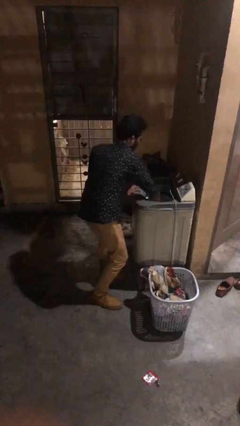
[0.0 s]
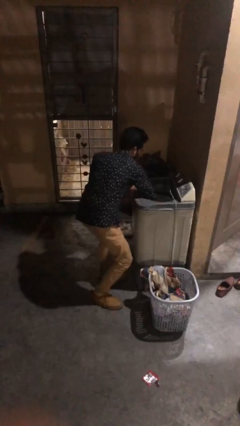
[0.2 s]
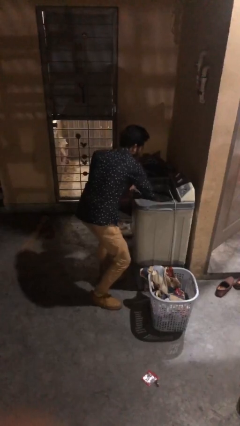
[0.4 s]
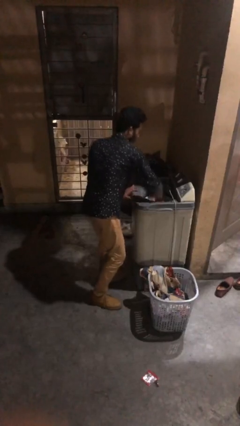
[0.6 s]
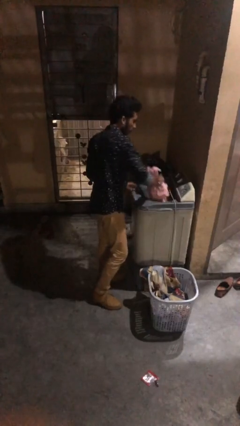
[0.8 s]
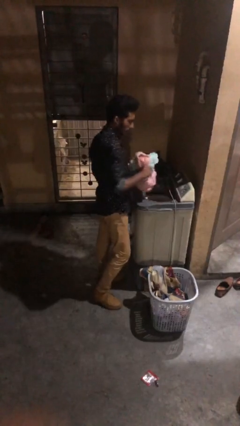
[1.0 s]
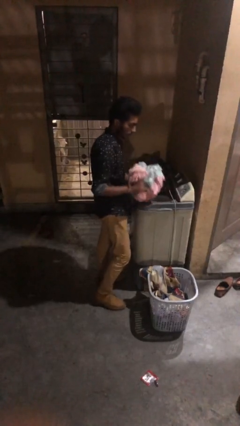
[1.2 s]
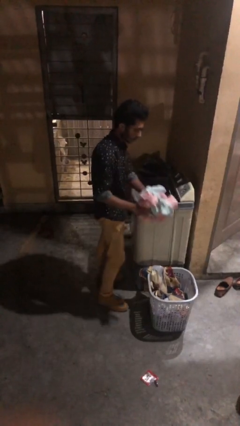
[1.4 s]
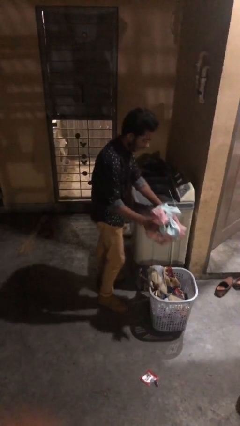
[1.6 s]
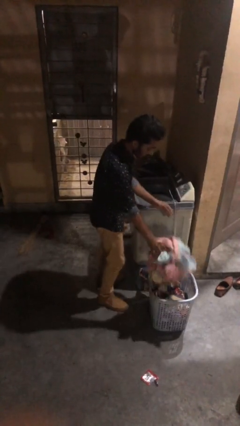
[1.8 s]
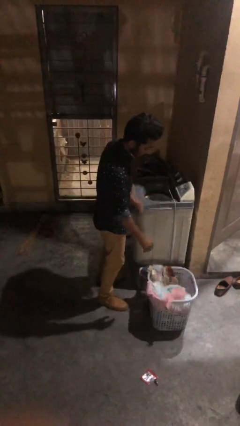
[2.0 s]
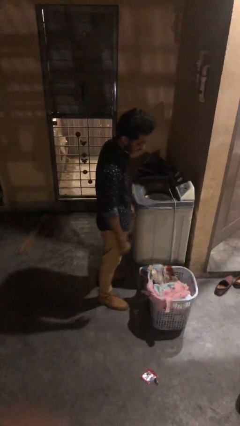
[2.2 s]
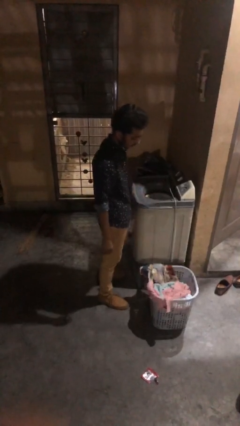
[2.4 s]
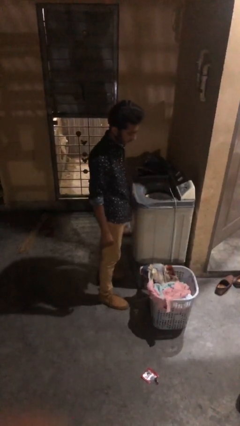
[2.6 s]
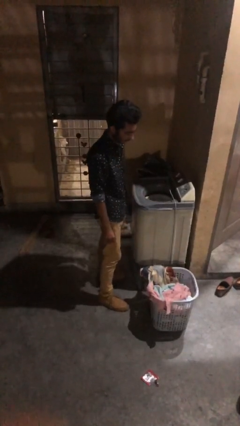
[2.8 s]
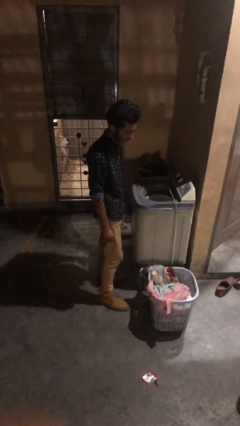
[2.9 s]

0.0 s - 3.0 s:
person unloads clotheswasher

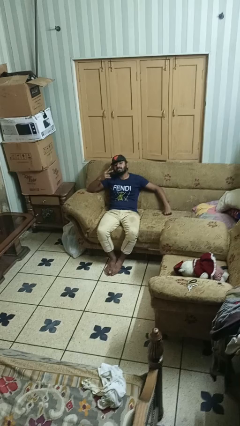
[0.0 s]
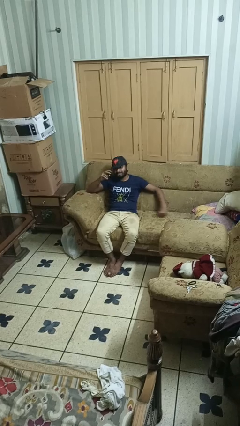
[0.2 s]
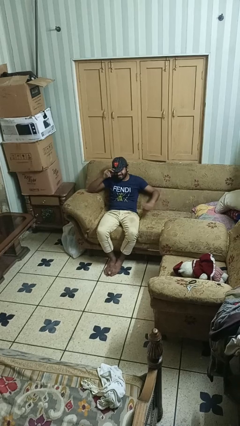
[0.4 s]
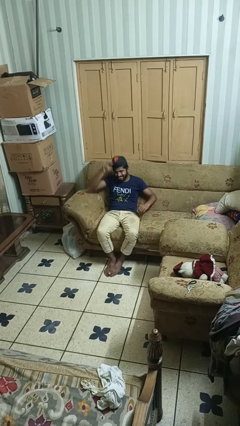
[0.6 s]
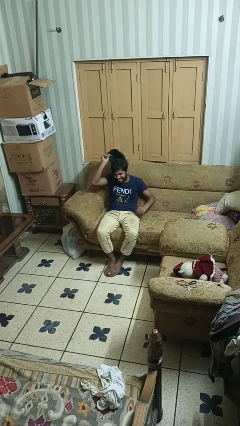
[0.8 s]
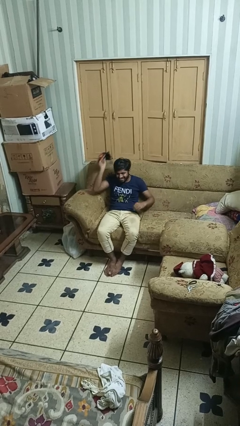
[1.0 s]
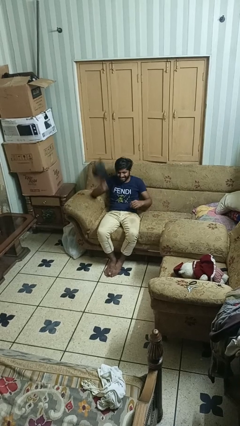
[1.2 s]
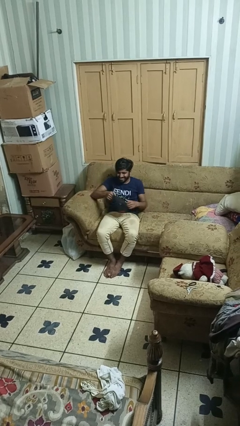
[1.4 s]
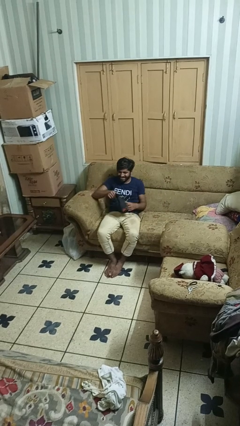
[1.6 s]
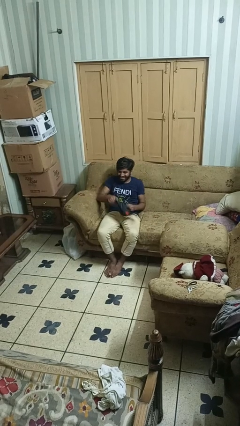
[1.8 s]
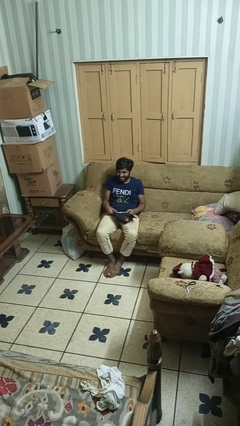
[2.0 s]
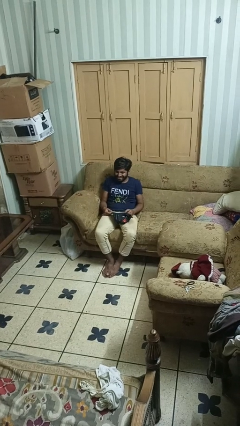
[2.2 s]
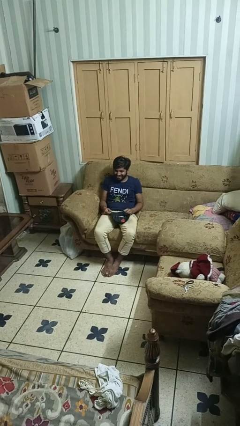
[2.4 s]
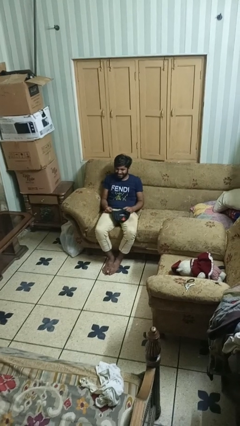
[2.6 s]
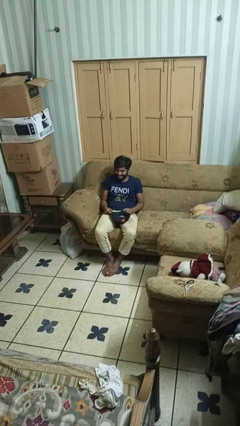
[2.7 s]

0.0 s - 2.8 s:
person takes off hat

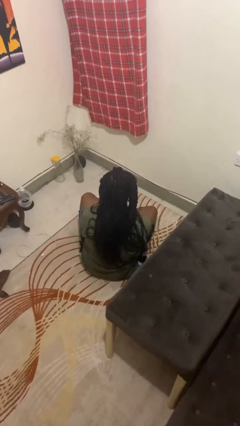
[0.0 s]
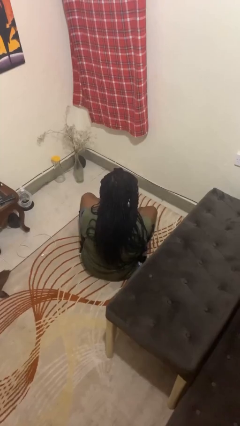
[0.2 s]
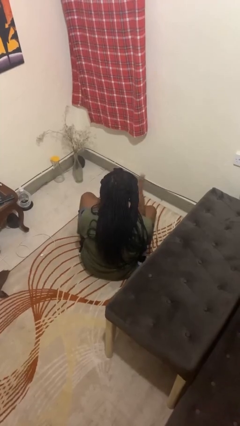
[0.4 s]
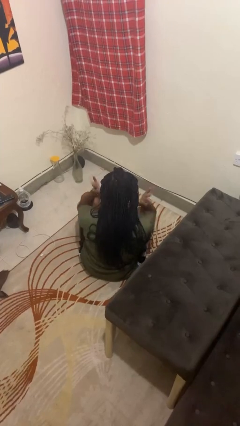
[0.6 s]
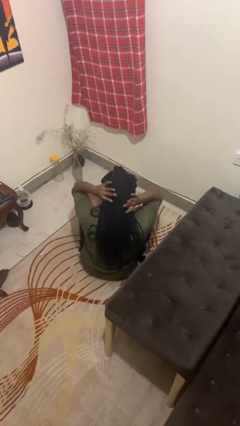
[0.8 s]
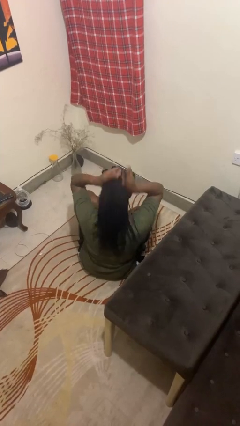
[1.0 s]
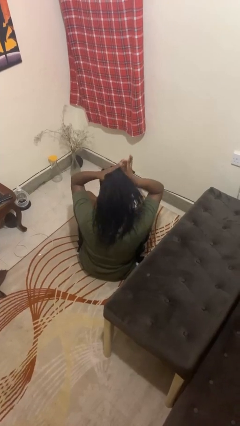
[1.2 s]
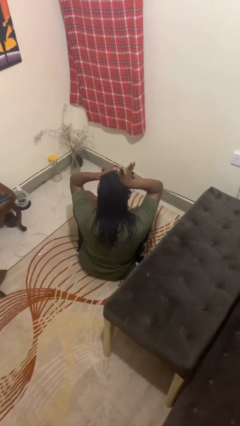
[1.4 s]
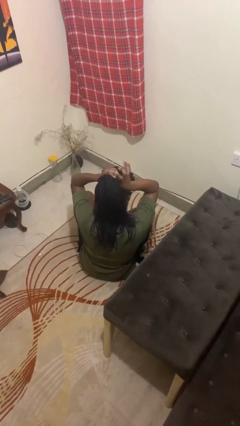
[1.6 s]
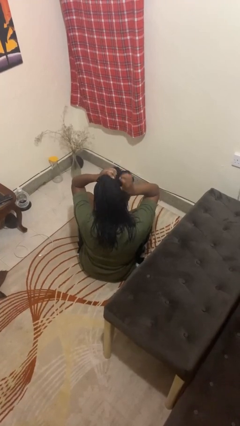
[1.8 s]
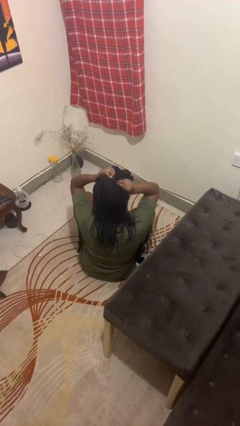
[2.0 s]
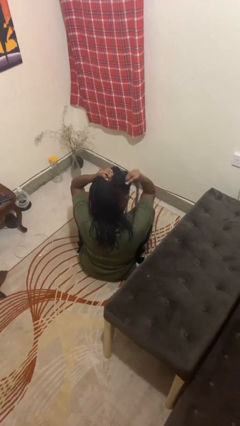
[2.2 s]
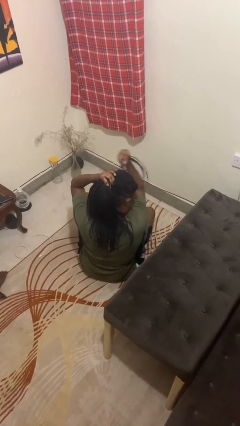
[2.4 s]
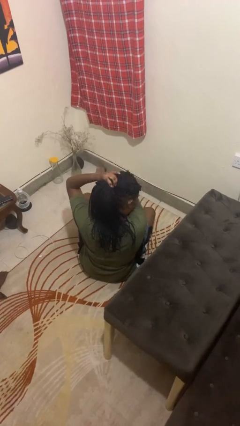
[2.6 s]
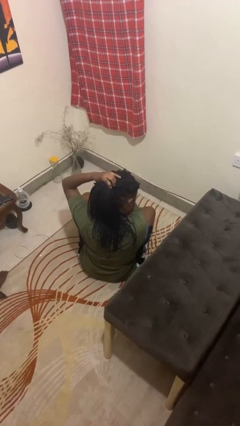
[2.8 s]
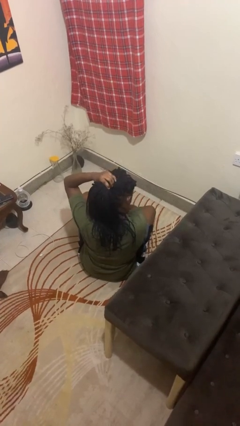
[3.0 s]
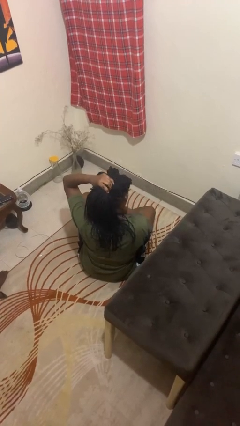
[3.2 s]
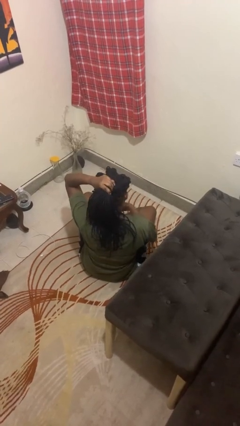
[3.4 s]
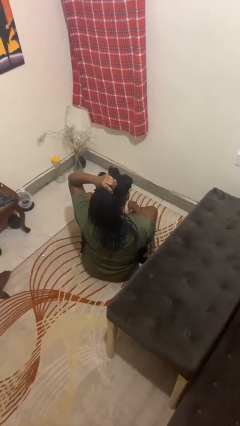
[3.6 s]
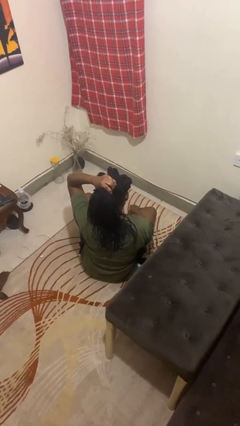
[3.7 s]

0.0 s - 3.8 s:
person puts hair in ponytail

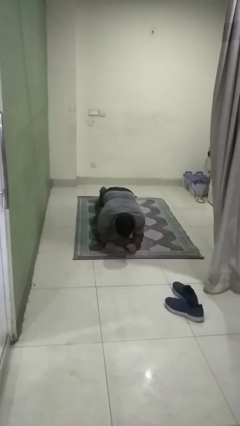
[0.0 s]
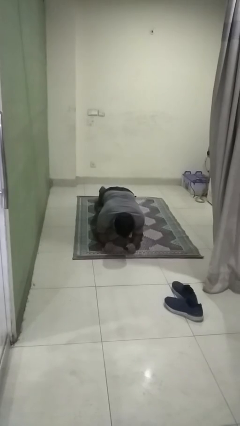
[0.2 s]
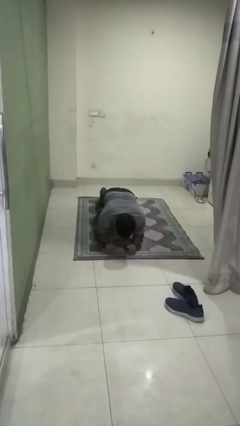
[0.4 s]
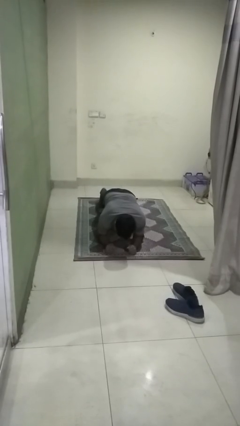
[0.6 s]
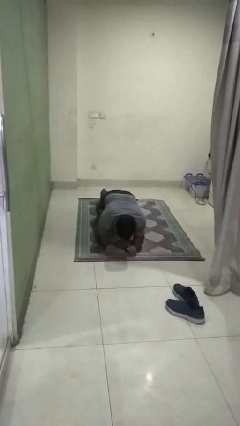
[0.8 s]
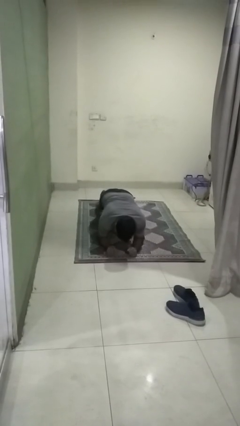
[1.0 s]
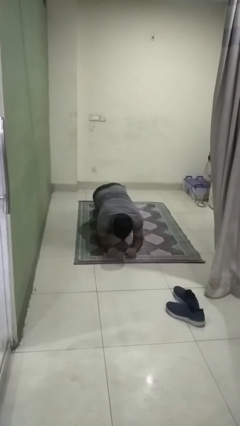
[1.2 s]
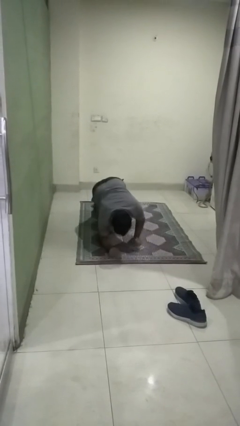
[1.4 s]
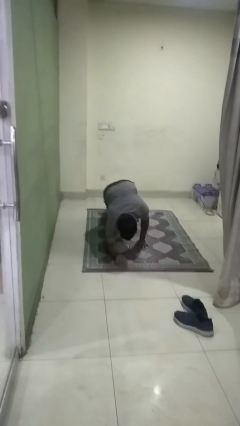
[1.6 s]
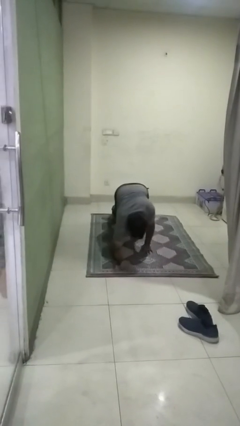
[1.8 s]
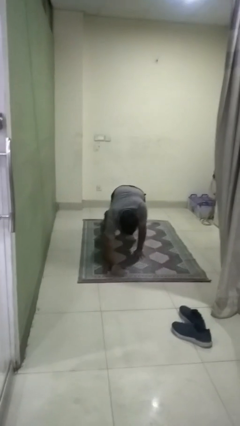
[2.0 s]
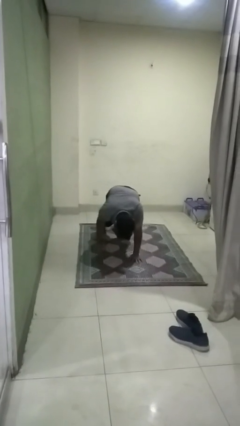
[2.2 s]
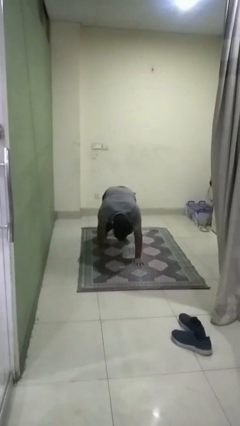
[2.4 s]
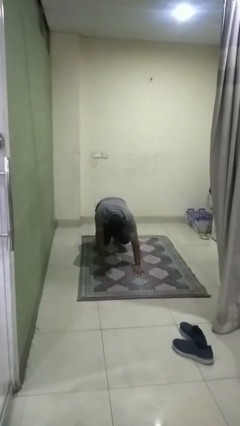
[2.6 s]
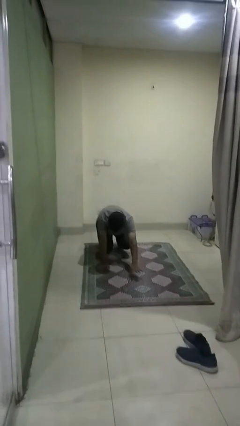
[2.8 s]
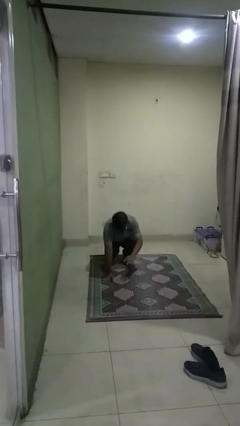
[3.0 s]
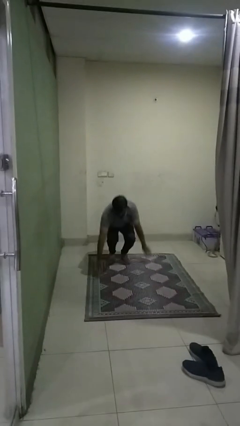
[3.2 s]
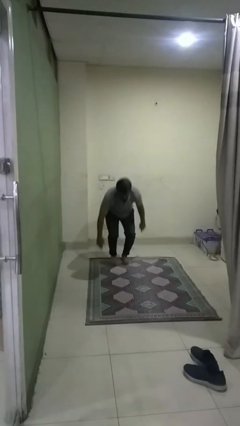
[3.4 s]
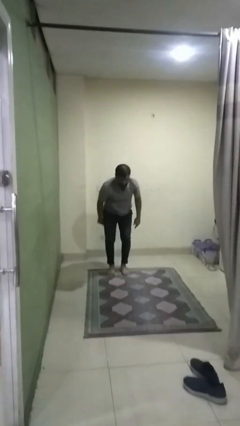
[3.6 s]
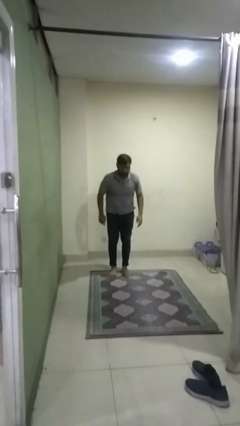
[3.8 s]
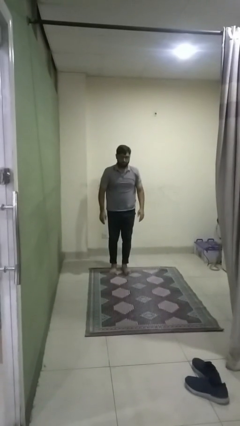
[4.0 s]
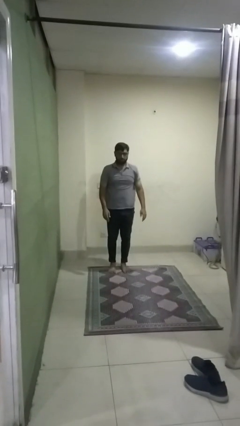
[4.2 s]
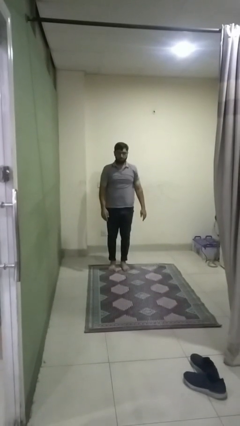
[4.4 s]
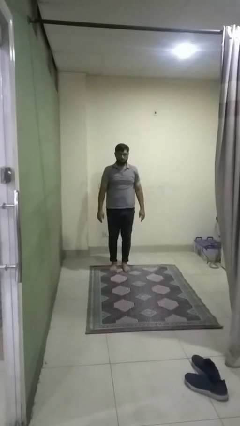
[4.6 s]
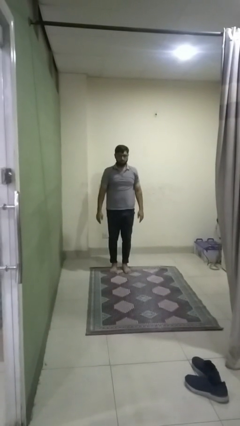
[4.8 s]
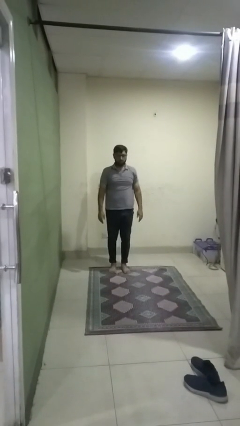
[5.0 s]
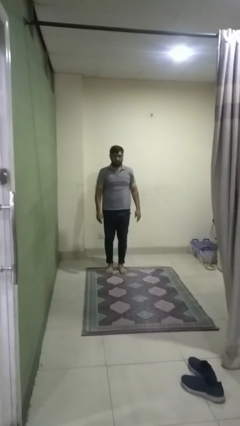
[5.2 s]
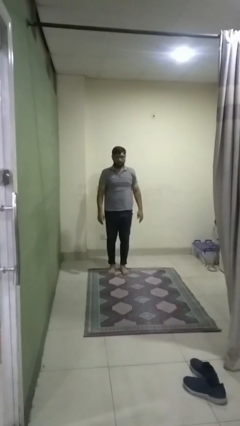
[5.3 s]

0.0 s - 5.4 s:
person stands up from floor

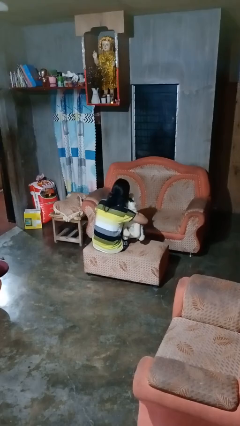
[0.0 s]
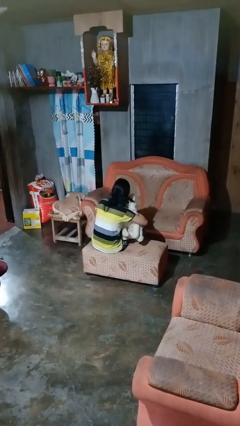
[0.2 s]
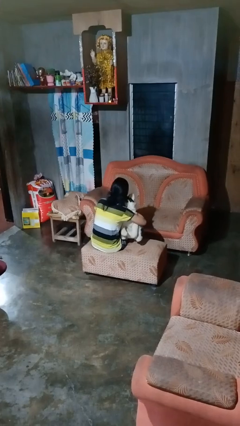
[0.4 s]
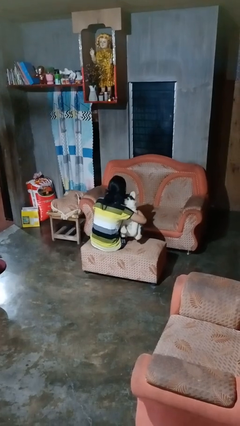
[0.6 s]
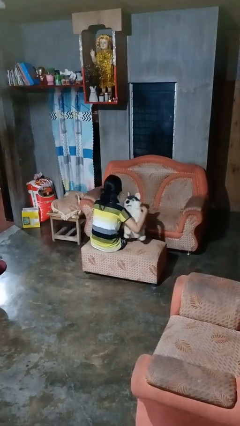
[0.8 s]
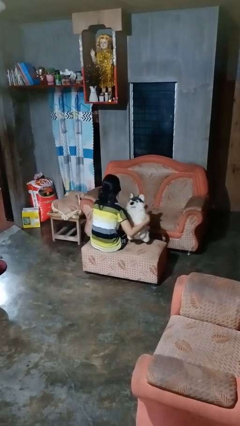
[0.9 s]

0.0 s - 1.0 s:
person hugs stuffed animal

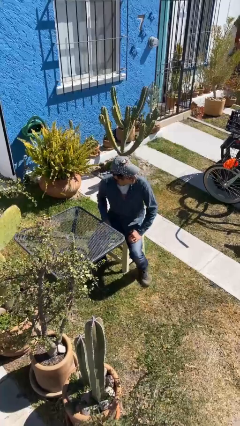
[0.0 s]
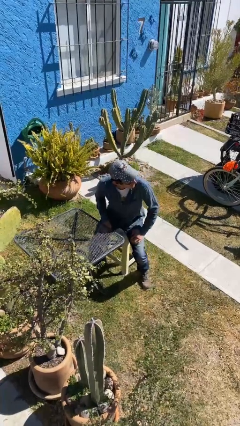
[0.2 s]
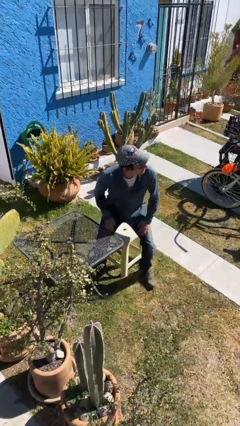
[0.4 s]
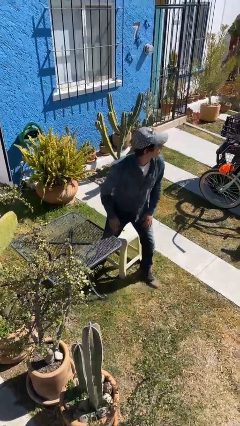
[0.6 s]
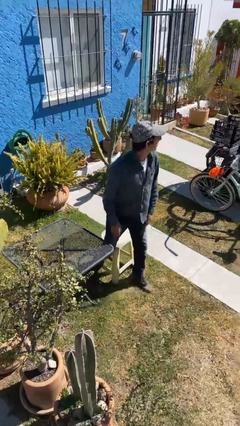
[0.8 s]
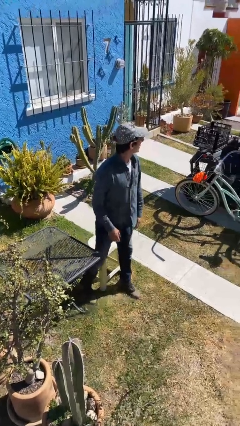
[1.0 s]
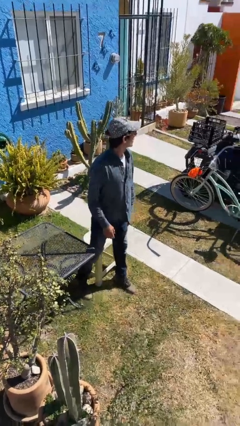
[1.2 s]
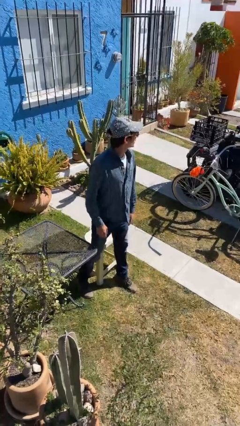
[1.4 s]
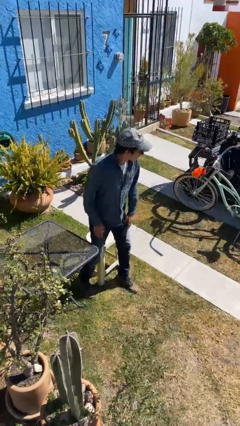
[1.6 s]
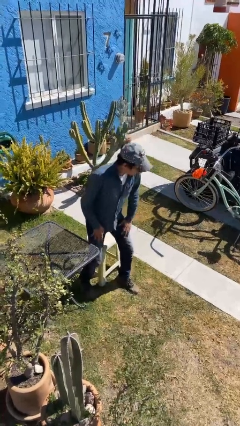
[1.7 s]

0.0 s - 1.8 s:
person stands up
